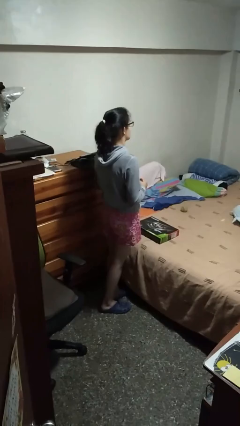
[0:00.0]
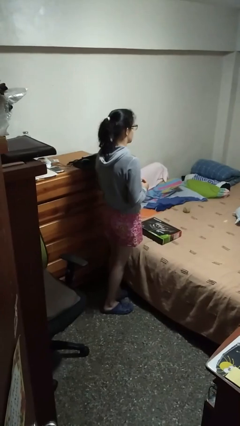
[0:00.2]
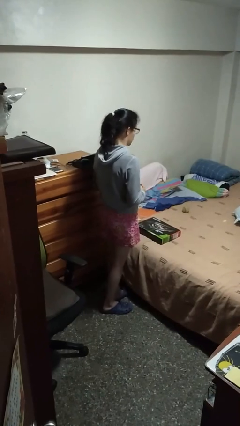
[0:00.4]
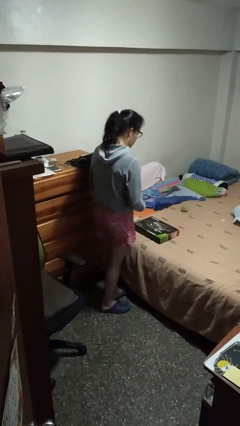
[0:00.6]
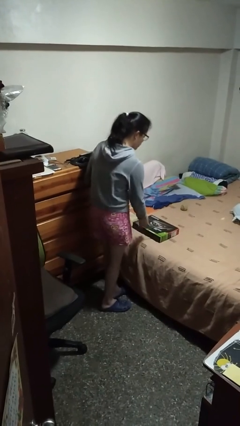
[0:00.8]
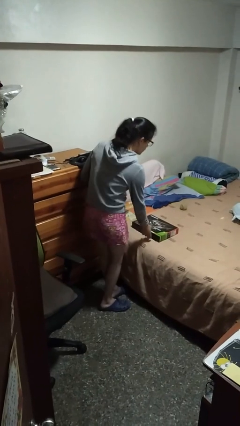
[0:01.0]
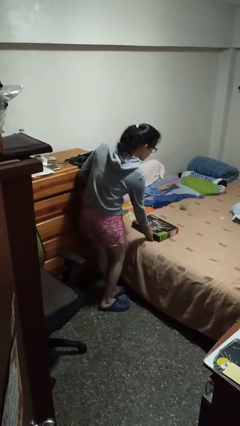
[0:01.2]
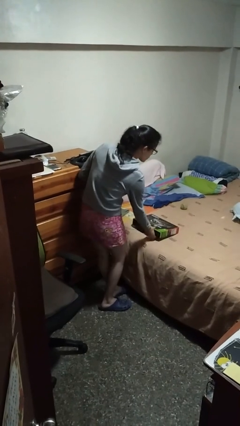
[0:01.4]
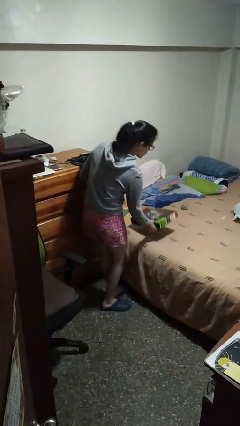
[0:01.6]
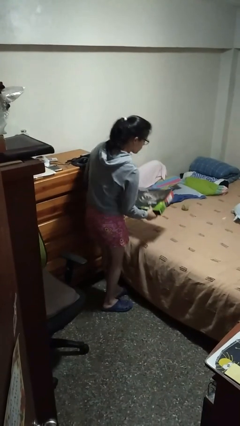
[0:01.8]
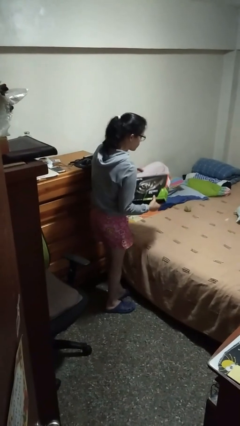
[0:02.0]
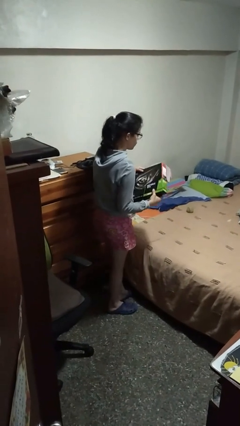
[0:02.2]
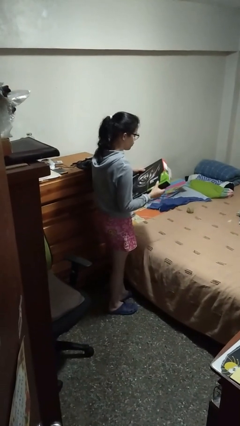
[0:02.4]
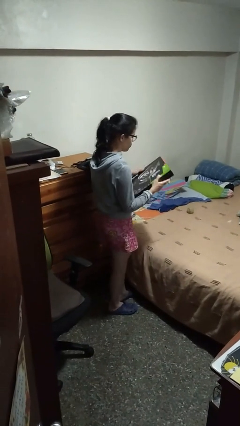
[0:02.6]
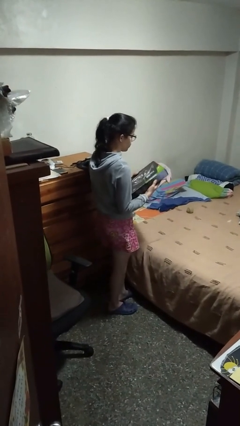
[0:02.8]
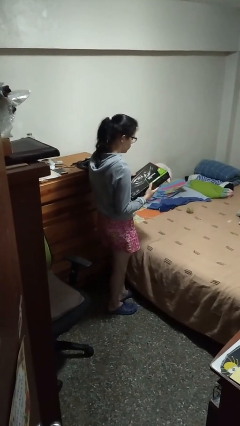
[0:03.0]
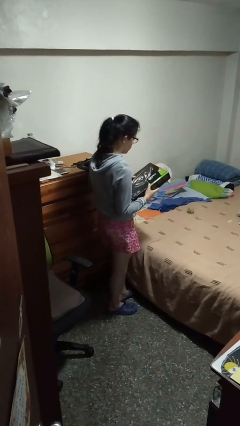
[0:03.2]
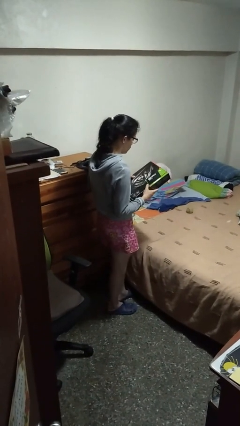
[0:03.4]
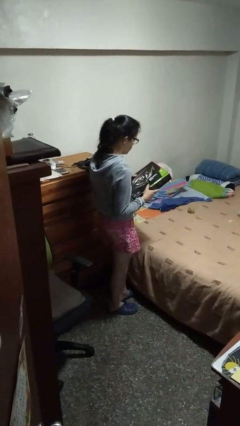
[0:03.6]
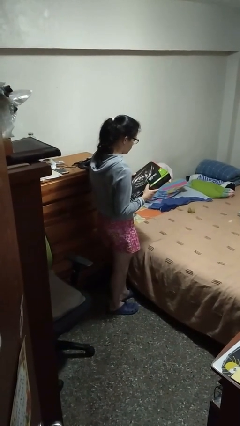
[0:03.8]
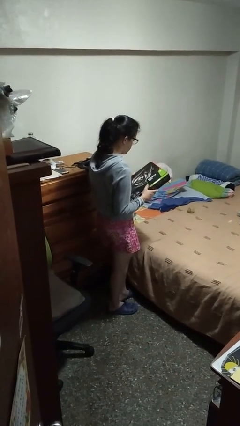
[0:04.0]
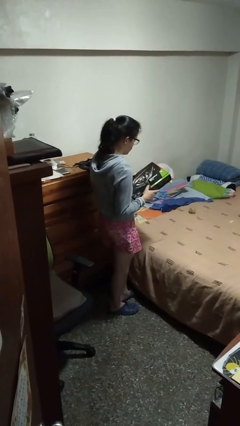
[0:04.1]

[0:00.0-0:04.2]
person picks up object from bed

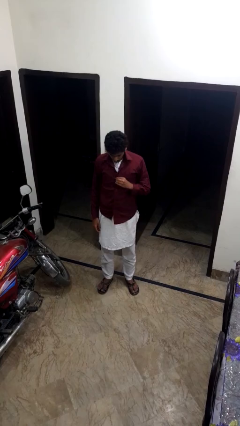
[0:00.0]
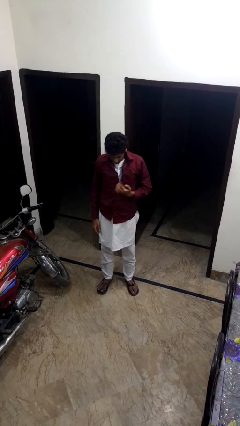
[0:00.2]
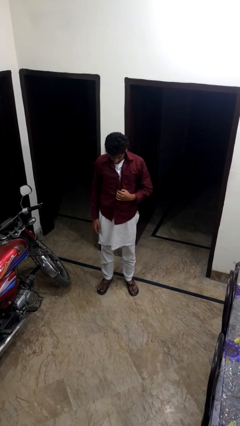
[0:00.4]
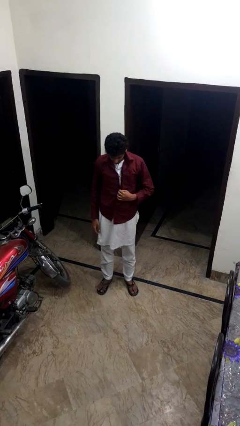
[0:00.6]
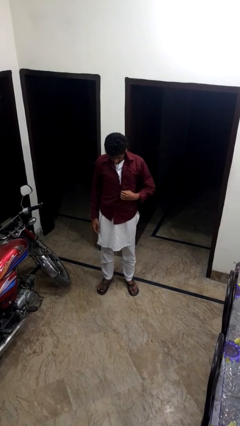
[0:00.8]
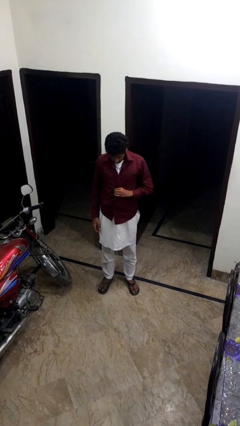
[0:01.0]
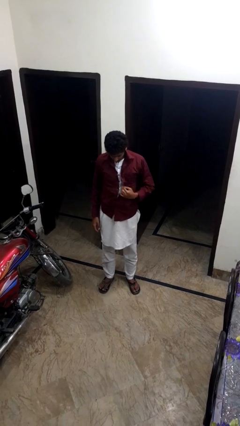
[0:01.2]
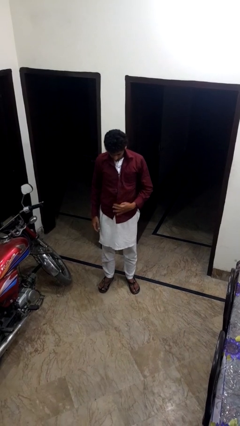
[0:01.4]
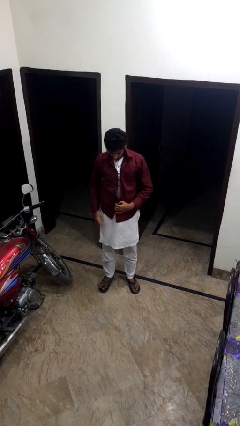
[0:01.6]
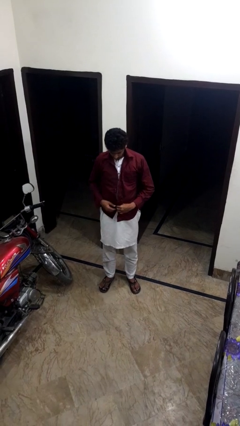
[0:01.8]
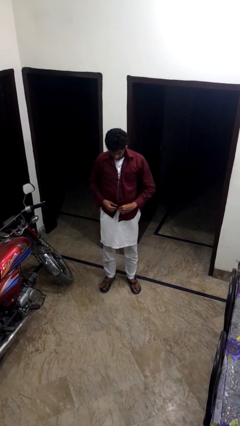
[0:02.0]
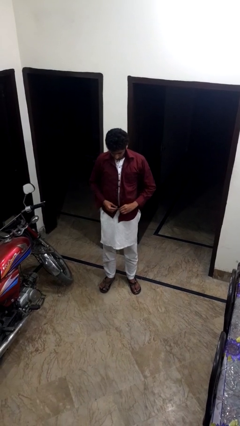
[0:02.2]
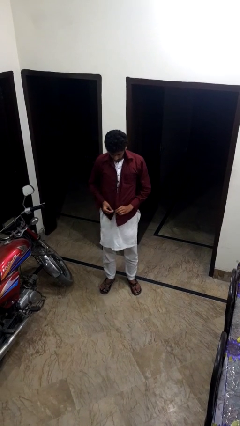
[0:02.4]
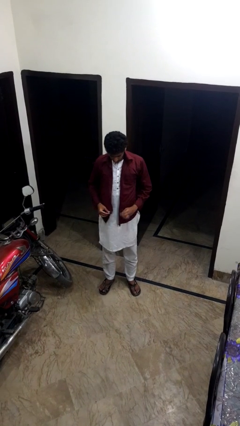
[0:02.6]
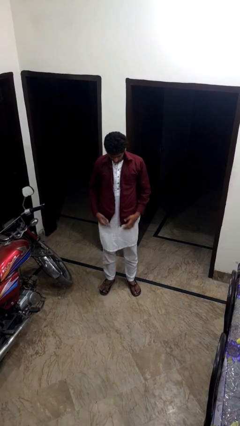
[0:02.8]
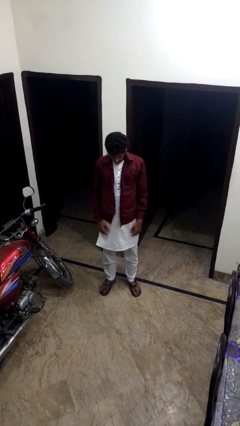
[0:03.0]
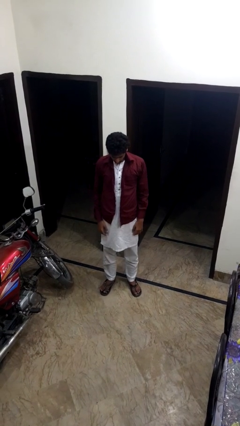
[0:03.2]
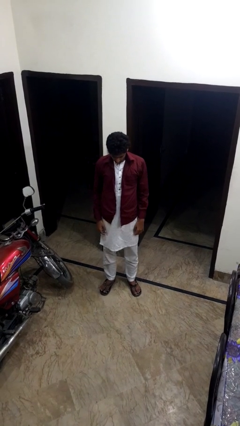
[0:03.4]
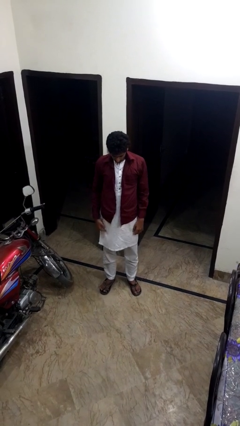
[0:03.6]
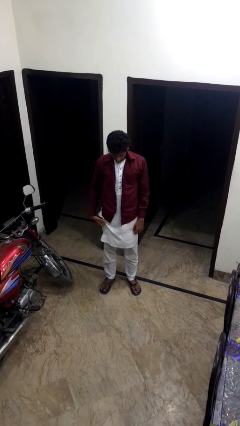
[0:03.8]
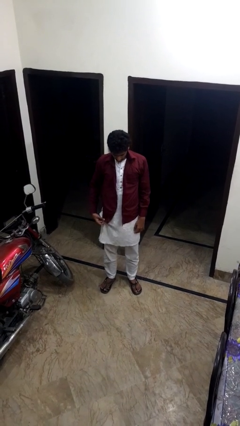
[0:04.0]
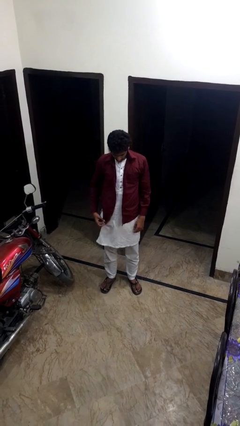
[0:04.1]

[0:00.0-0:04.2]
person unbuttons shirt

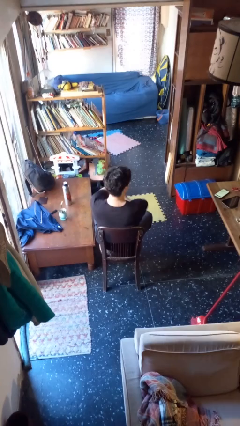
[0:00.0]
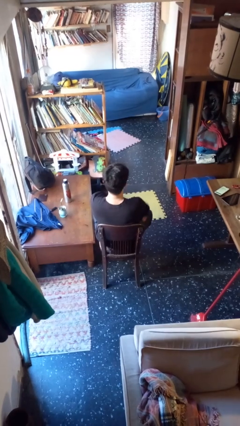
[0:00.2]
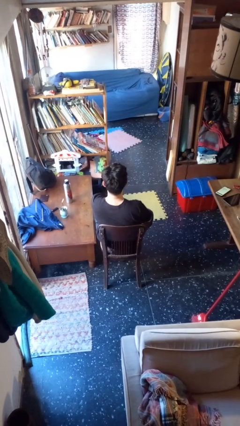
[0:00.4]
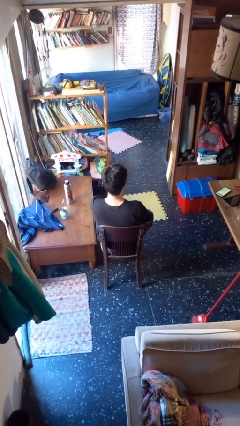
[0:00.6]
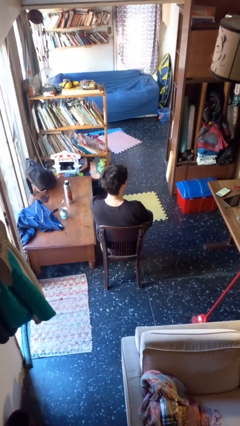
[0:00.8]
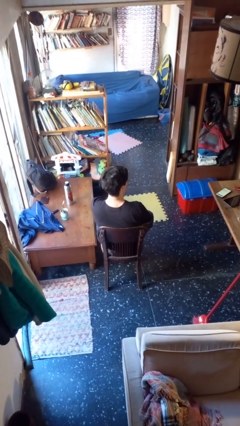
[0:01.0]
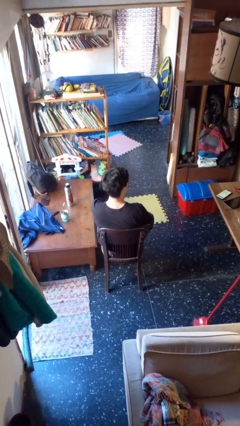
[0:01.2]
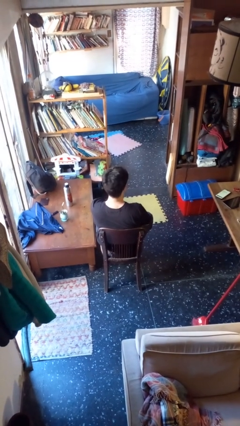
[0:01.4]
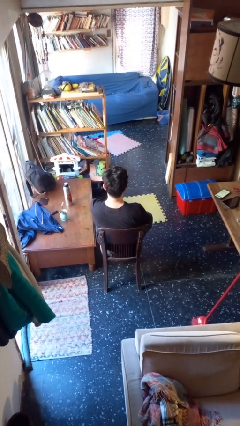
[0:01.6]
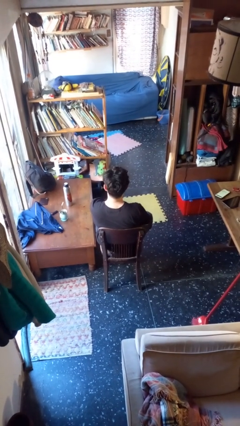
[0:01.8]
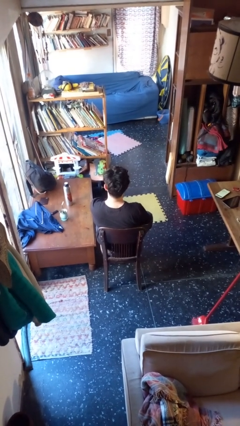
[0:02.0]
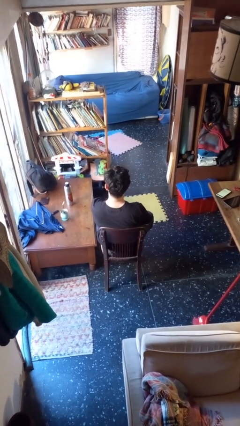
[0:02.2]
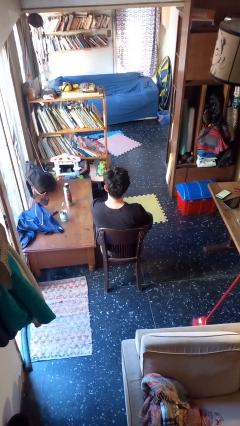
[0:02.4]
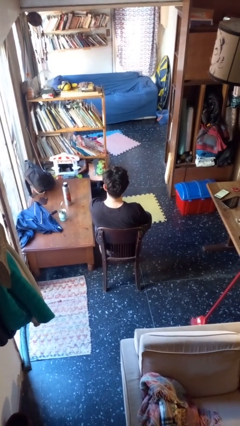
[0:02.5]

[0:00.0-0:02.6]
person crosses arms

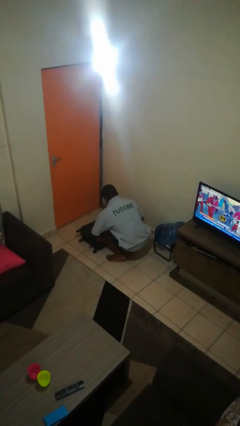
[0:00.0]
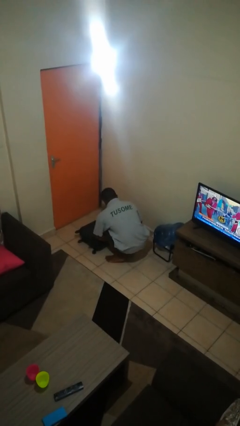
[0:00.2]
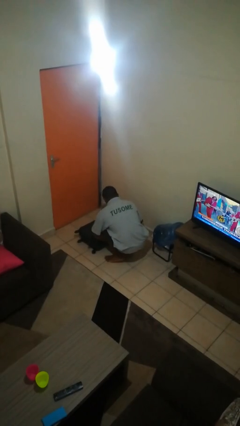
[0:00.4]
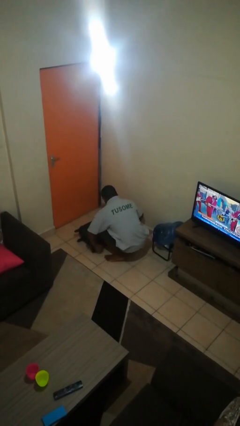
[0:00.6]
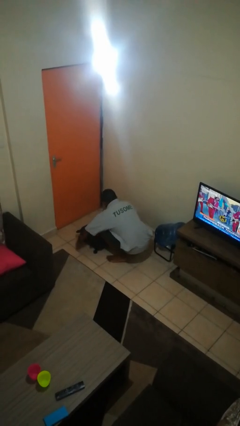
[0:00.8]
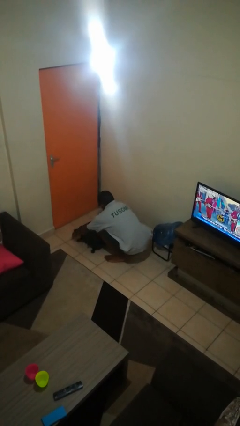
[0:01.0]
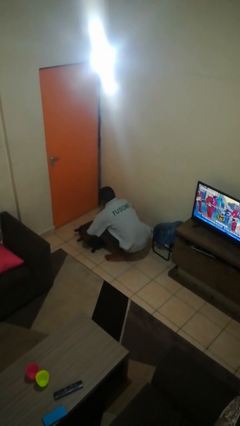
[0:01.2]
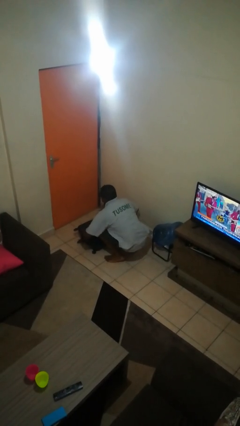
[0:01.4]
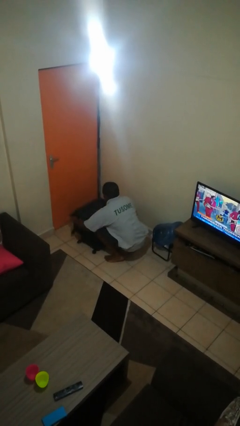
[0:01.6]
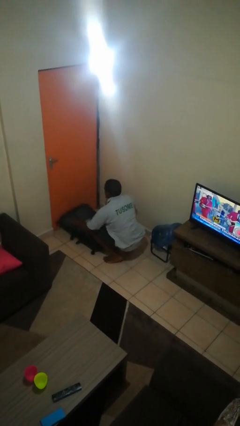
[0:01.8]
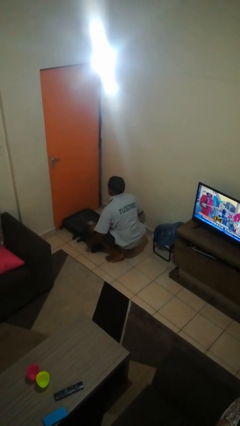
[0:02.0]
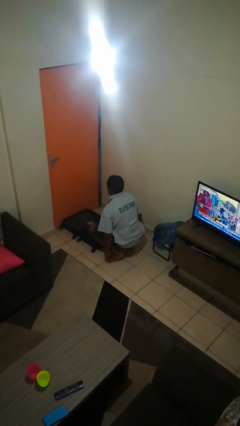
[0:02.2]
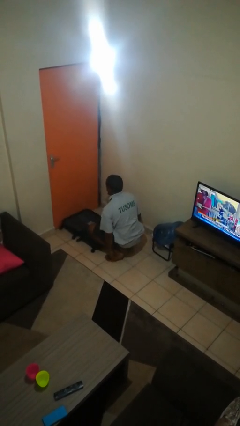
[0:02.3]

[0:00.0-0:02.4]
person opens suitcase

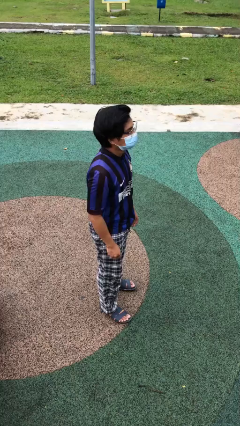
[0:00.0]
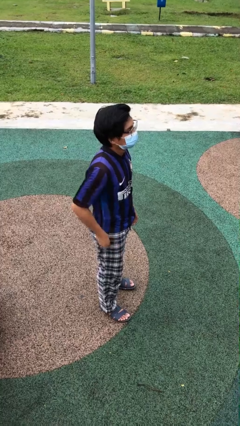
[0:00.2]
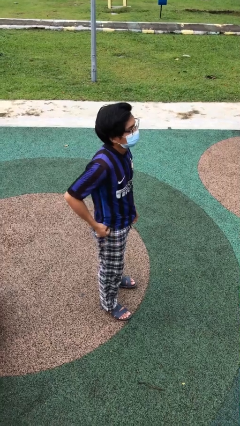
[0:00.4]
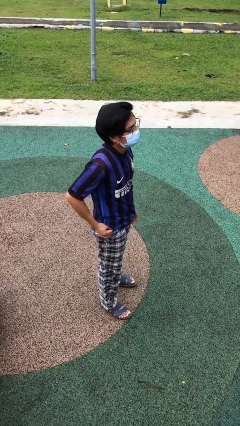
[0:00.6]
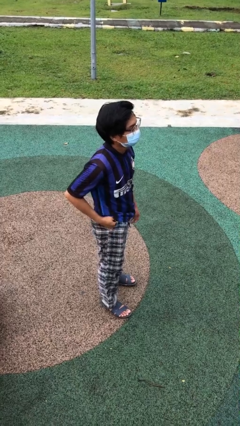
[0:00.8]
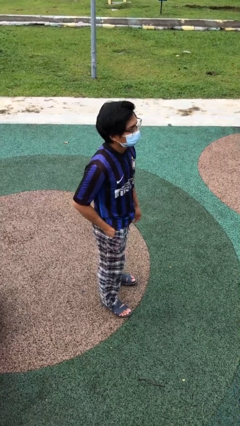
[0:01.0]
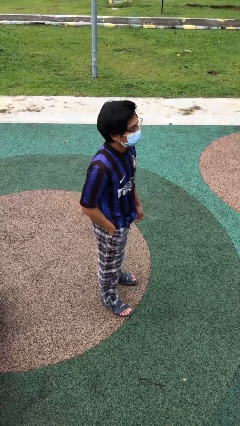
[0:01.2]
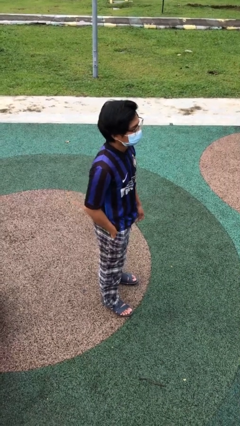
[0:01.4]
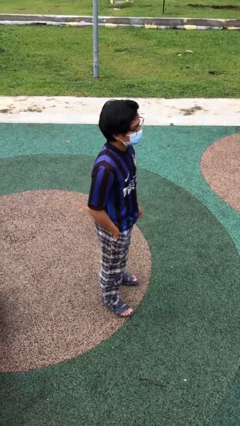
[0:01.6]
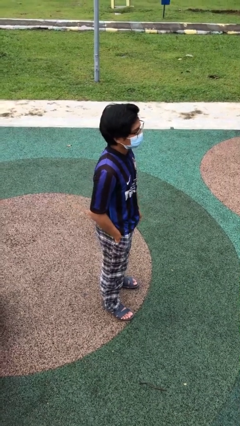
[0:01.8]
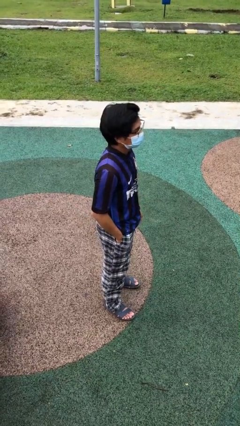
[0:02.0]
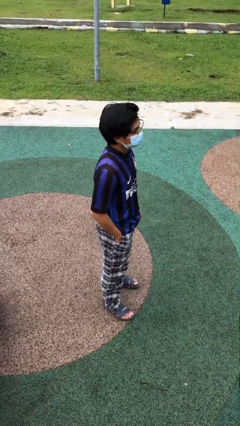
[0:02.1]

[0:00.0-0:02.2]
person puts hands in back pockets

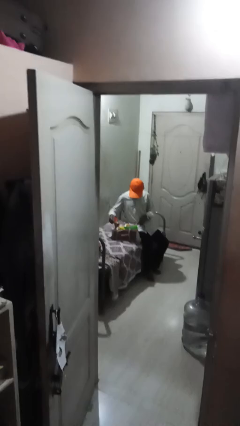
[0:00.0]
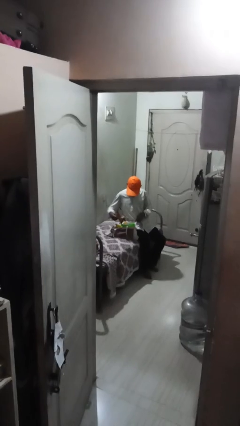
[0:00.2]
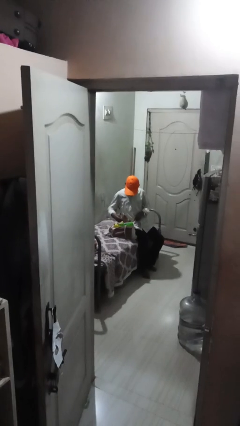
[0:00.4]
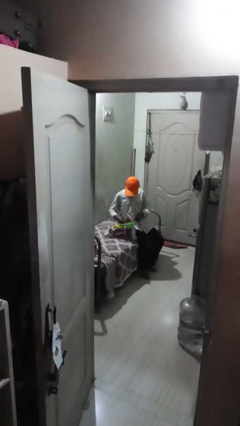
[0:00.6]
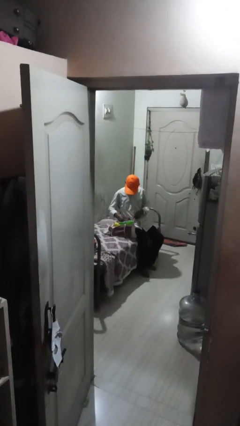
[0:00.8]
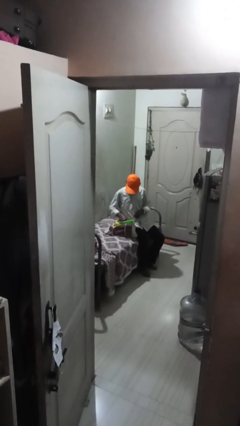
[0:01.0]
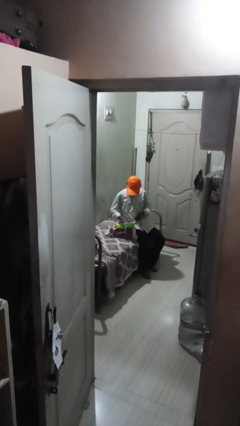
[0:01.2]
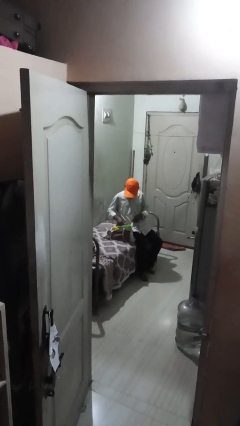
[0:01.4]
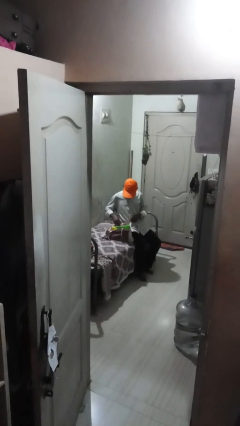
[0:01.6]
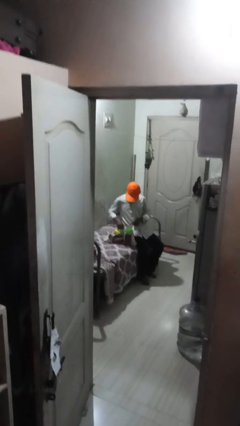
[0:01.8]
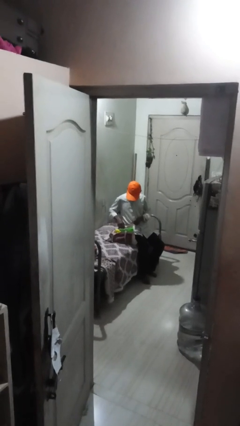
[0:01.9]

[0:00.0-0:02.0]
person puts object into bag
